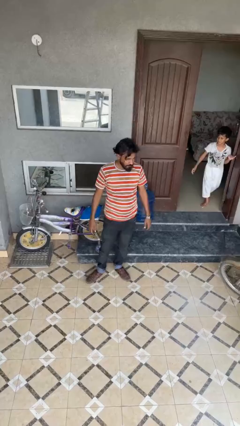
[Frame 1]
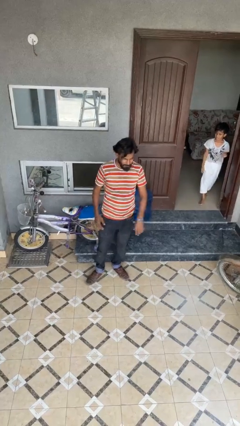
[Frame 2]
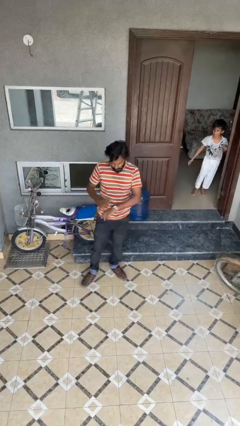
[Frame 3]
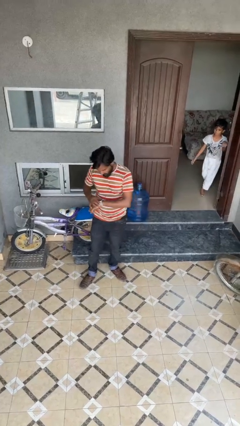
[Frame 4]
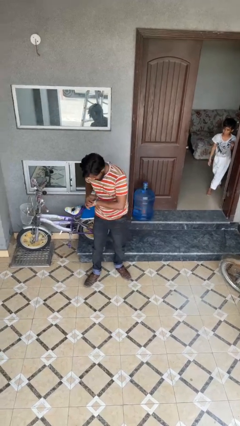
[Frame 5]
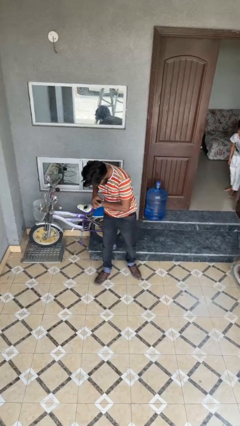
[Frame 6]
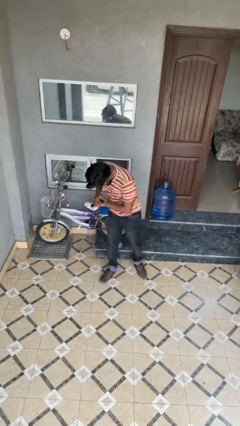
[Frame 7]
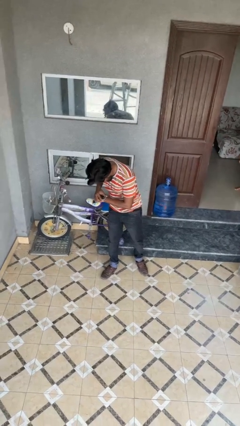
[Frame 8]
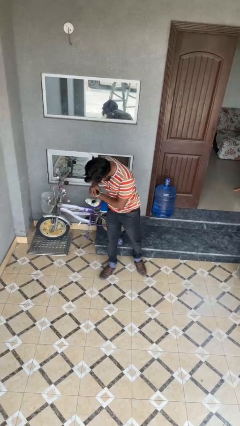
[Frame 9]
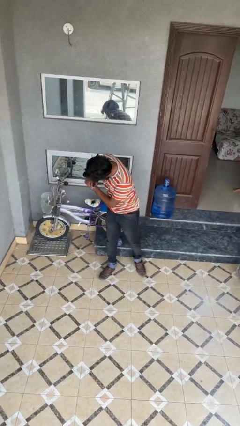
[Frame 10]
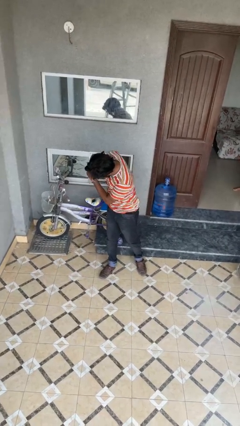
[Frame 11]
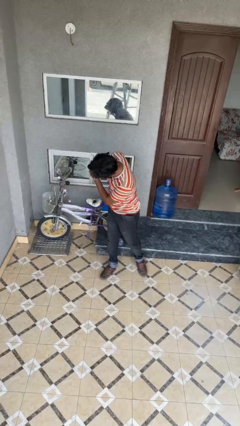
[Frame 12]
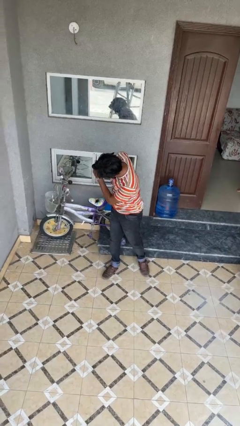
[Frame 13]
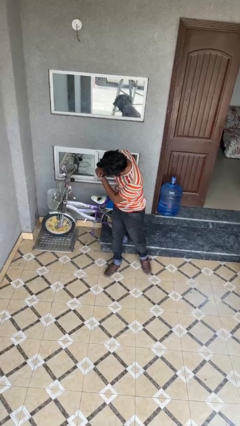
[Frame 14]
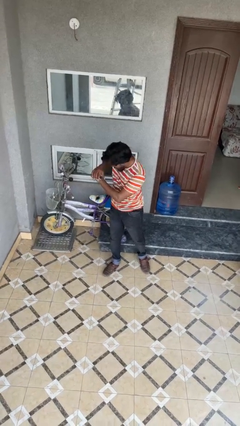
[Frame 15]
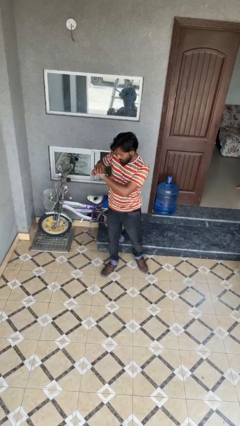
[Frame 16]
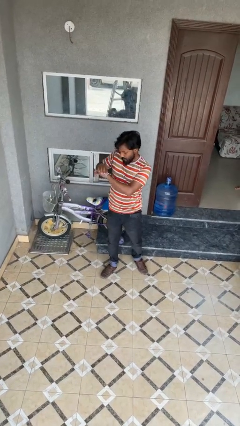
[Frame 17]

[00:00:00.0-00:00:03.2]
person looks at wristwatch

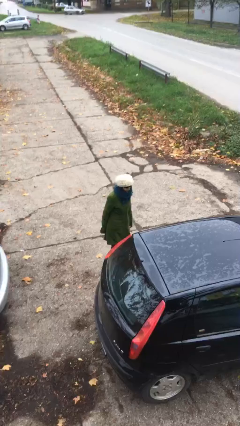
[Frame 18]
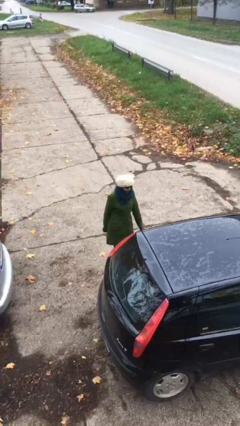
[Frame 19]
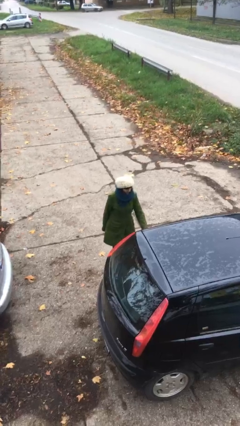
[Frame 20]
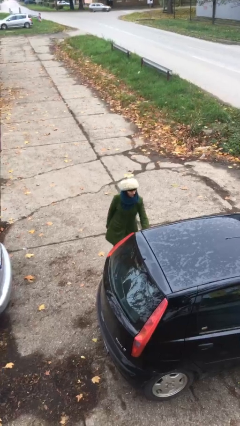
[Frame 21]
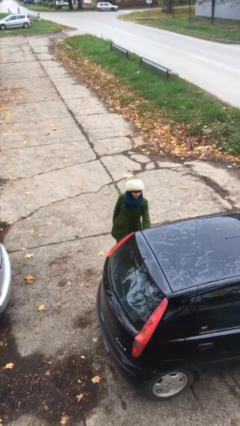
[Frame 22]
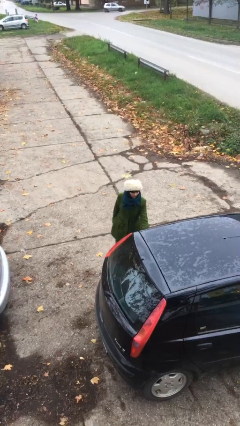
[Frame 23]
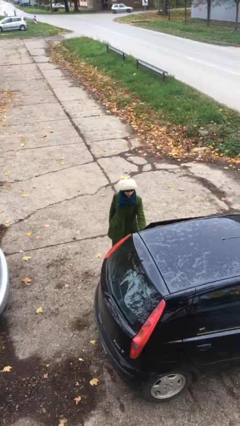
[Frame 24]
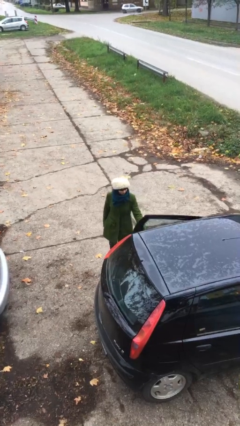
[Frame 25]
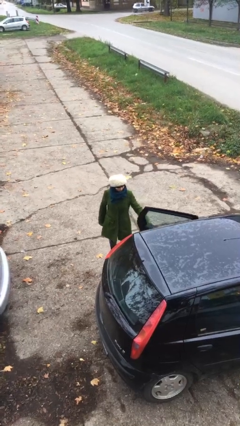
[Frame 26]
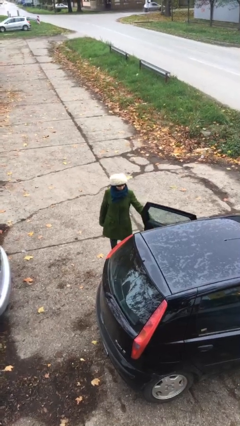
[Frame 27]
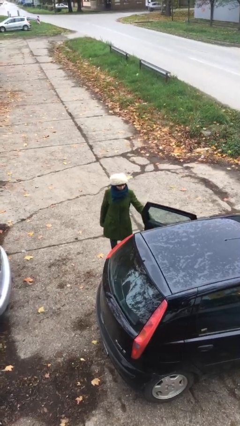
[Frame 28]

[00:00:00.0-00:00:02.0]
person opens car door

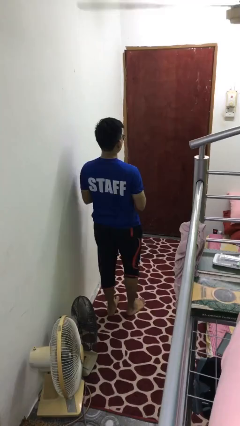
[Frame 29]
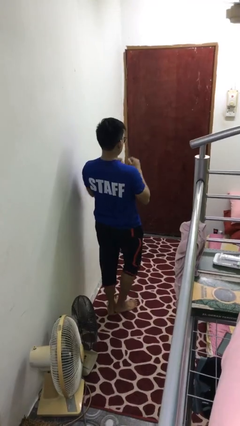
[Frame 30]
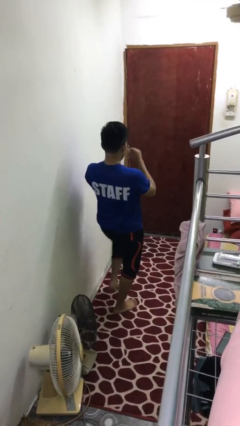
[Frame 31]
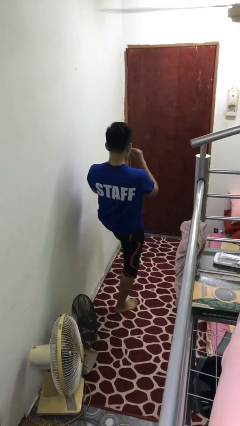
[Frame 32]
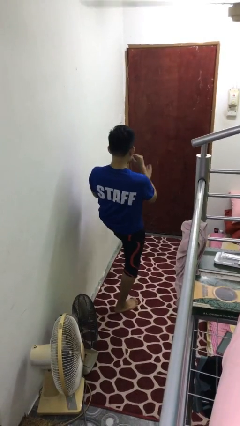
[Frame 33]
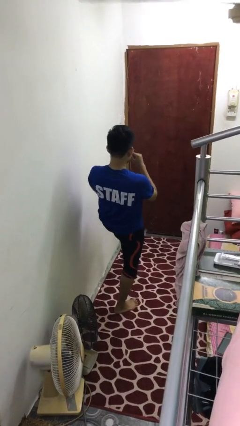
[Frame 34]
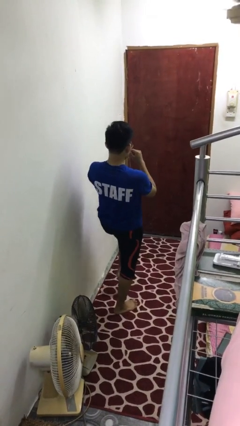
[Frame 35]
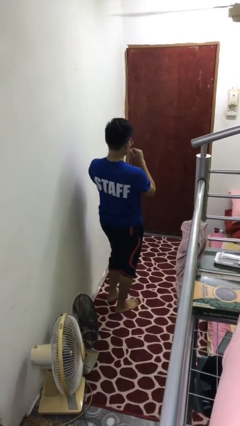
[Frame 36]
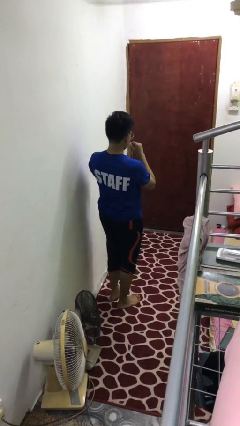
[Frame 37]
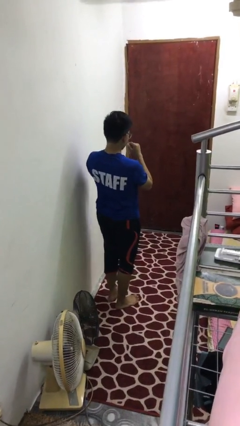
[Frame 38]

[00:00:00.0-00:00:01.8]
person karate kicks

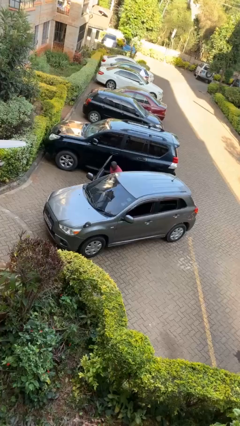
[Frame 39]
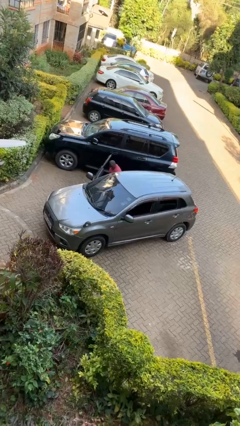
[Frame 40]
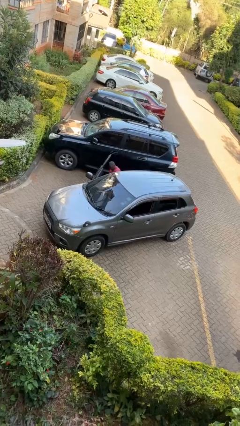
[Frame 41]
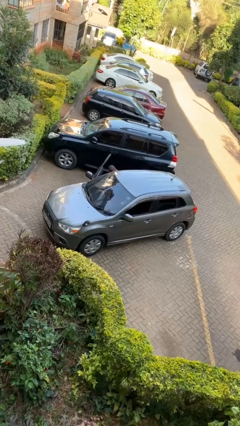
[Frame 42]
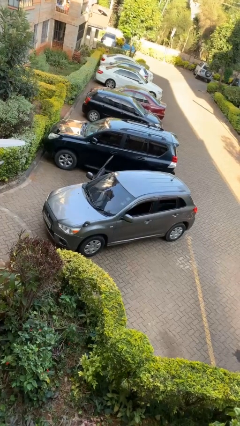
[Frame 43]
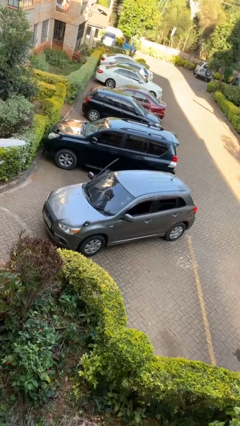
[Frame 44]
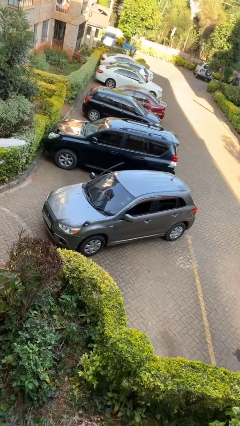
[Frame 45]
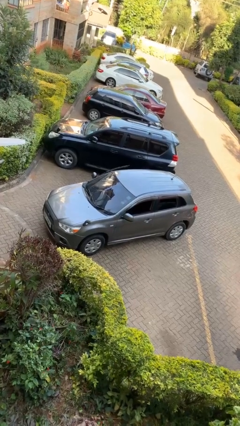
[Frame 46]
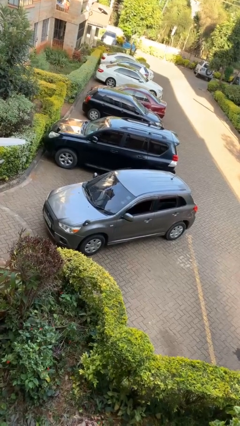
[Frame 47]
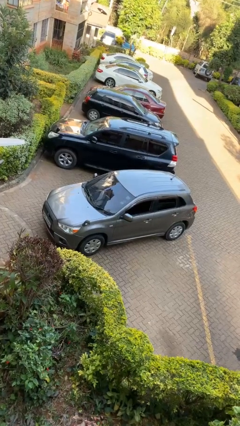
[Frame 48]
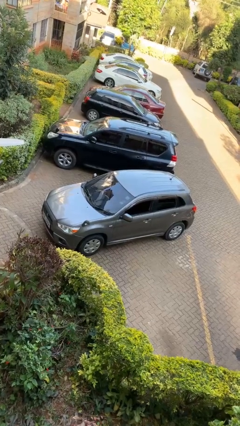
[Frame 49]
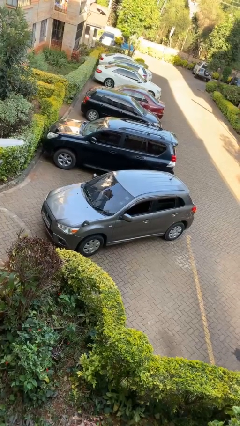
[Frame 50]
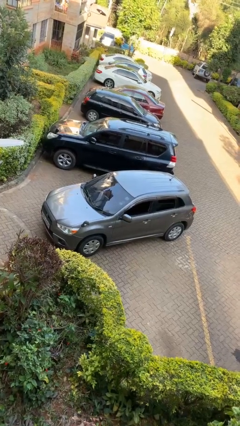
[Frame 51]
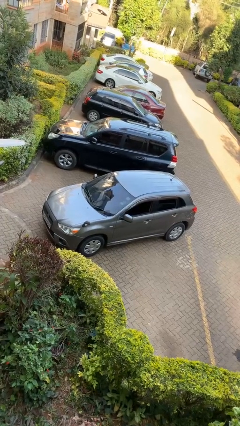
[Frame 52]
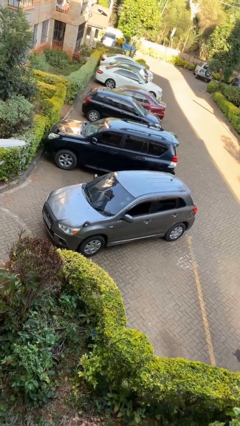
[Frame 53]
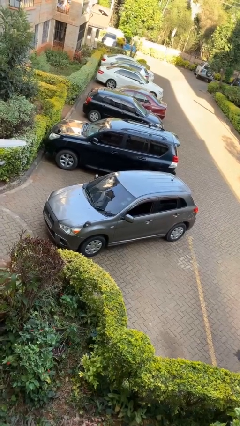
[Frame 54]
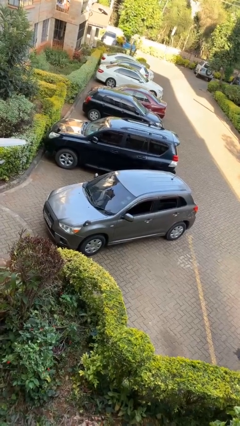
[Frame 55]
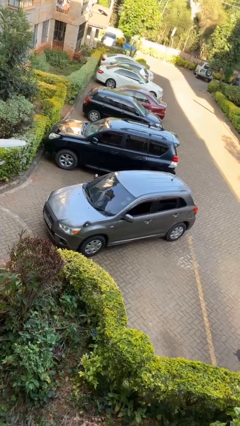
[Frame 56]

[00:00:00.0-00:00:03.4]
car picks up person

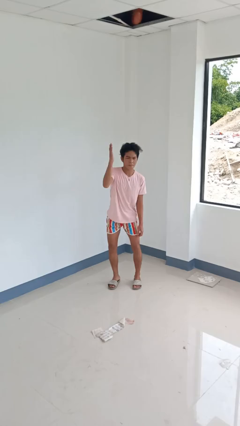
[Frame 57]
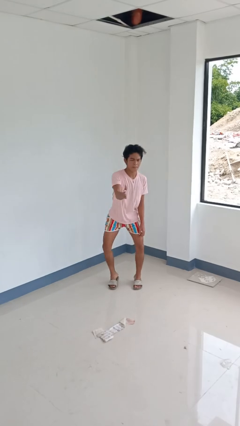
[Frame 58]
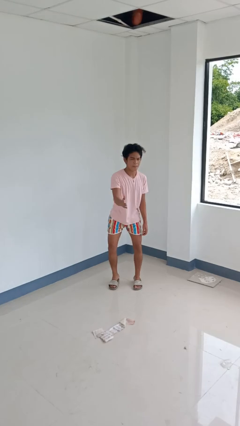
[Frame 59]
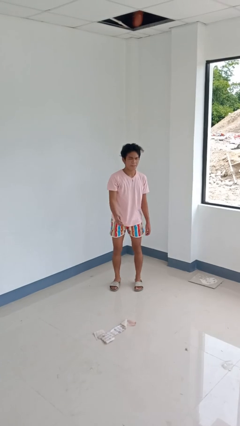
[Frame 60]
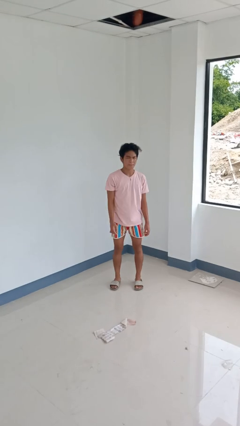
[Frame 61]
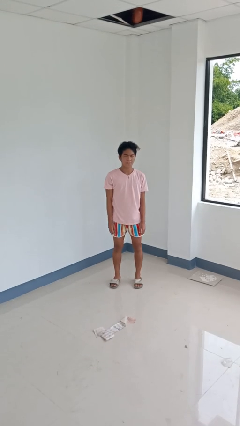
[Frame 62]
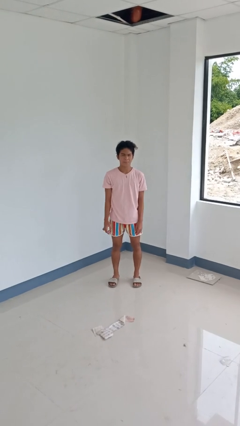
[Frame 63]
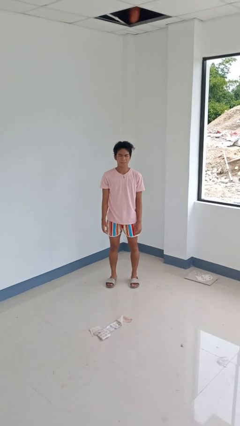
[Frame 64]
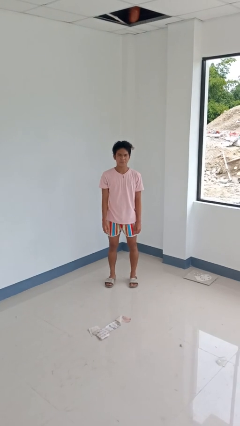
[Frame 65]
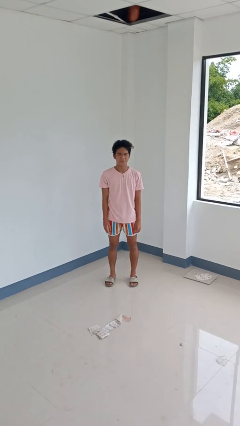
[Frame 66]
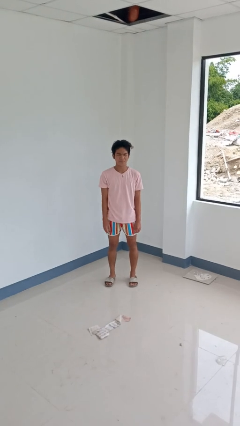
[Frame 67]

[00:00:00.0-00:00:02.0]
person karate chop

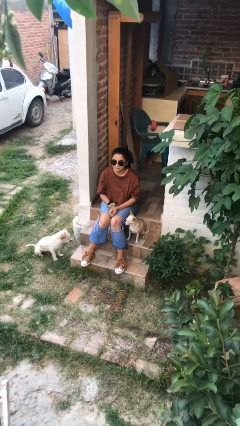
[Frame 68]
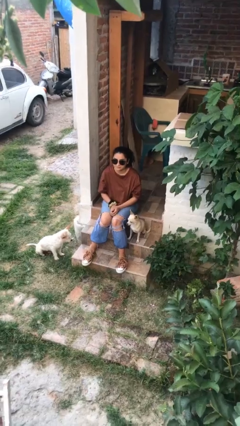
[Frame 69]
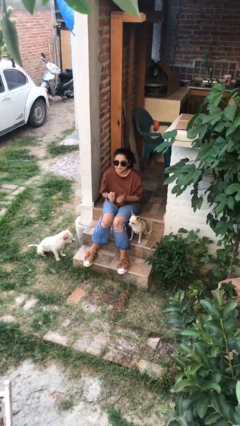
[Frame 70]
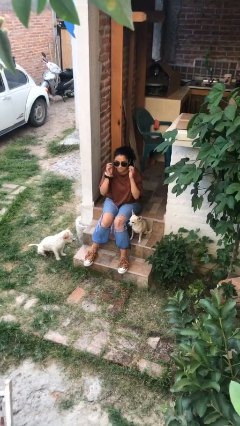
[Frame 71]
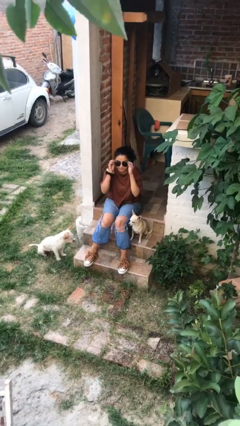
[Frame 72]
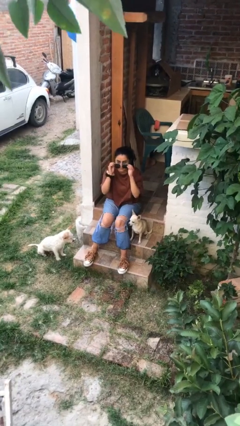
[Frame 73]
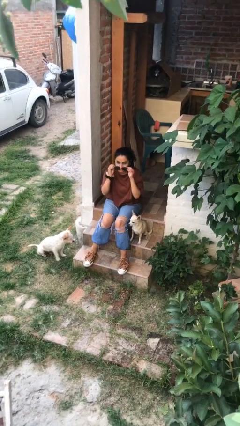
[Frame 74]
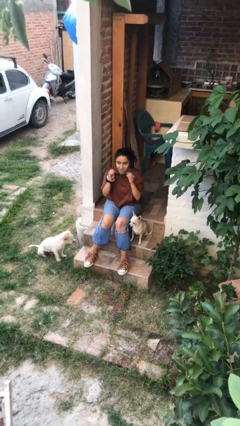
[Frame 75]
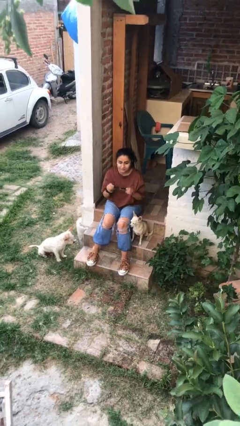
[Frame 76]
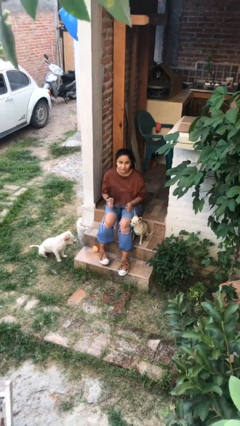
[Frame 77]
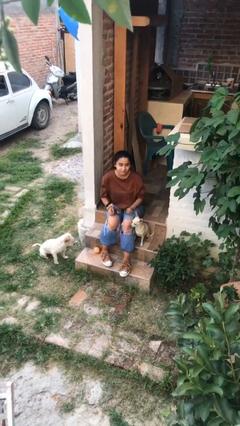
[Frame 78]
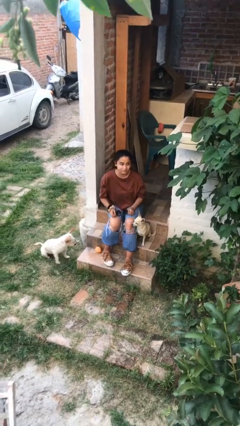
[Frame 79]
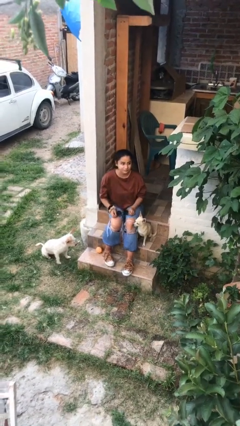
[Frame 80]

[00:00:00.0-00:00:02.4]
person takes off sunglasses

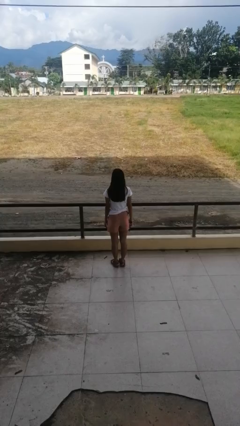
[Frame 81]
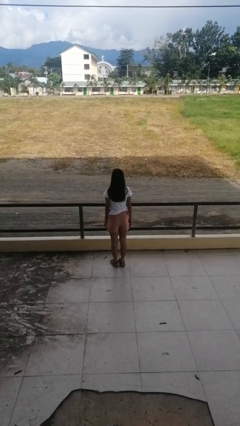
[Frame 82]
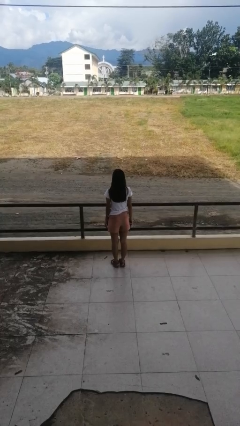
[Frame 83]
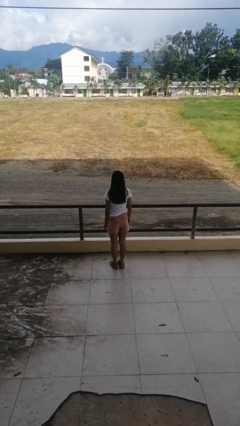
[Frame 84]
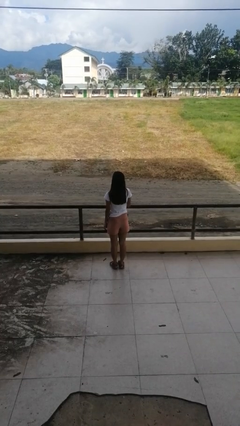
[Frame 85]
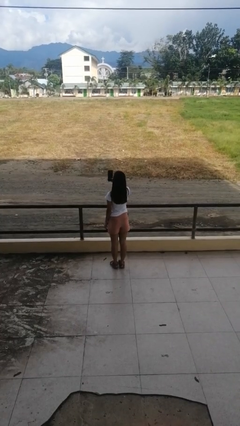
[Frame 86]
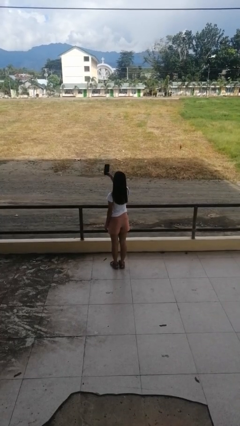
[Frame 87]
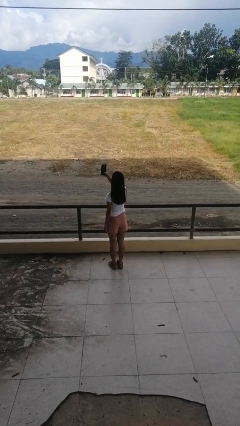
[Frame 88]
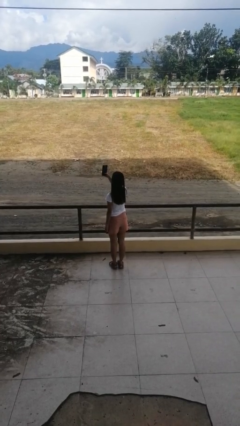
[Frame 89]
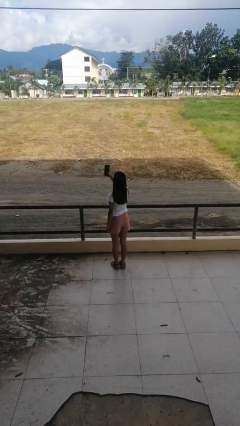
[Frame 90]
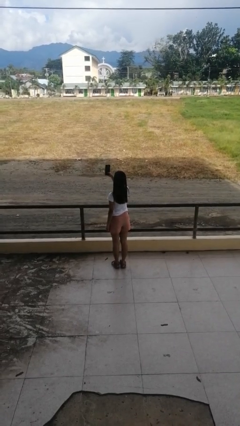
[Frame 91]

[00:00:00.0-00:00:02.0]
person takes selfie
